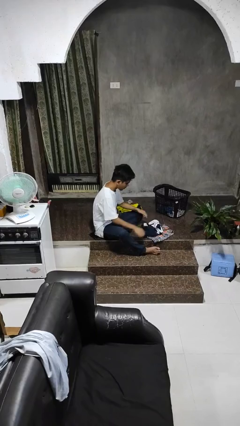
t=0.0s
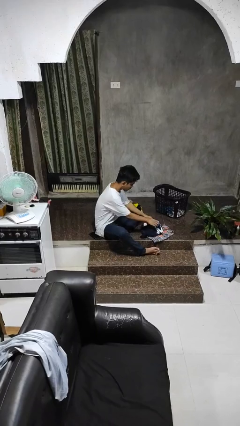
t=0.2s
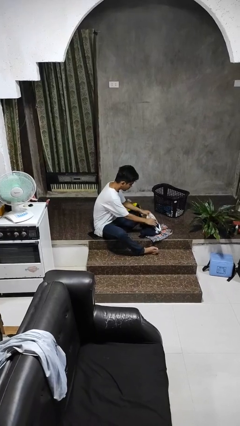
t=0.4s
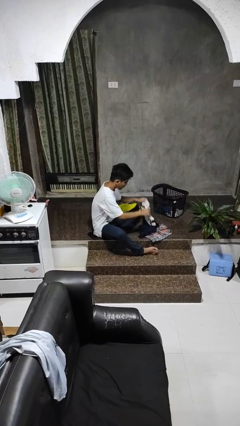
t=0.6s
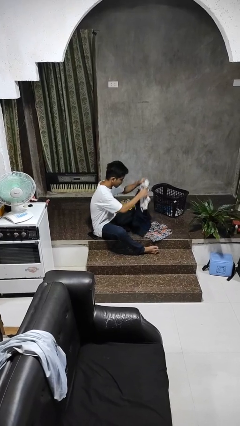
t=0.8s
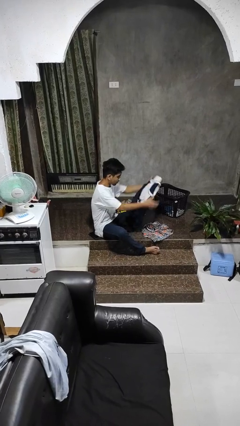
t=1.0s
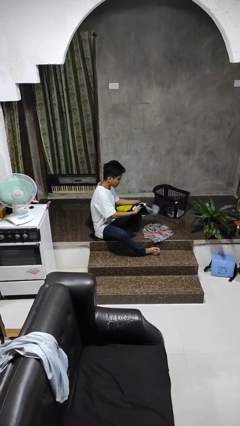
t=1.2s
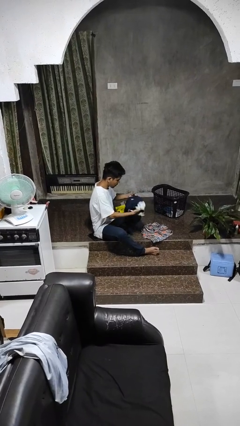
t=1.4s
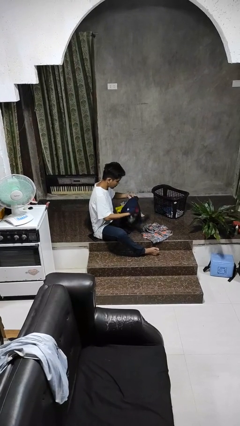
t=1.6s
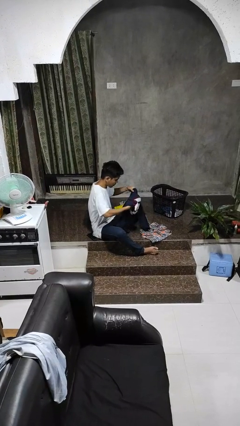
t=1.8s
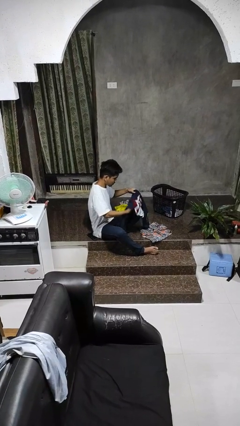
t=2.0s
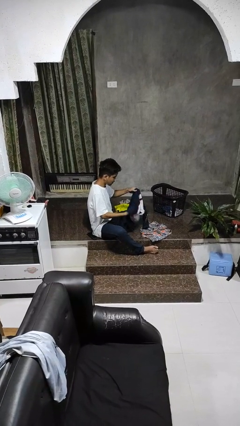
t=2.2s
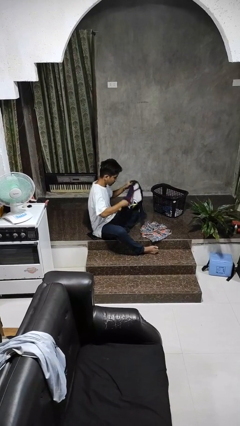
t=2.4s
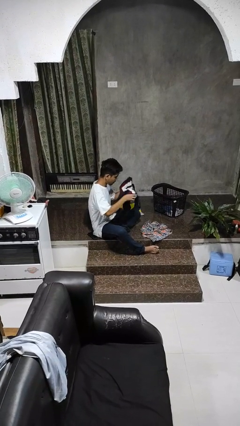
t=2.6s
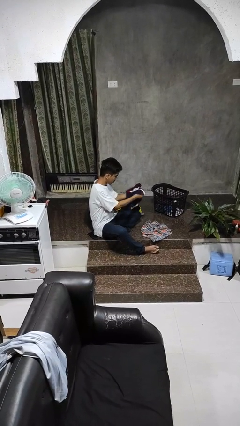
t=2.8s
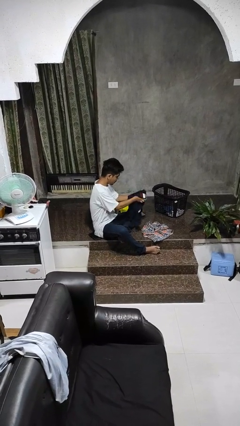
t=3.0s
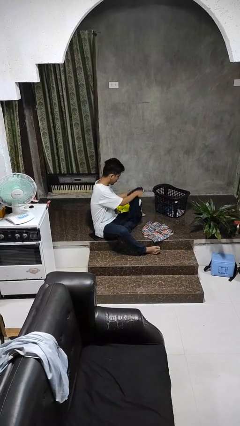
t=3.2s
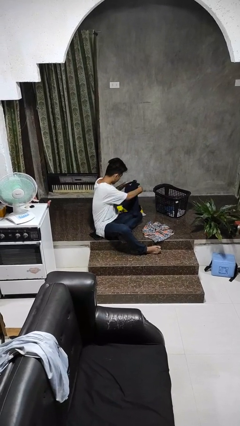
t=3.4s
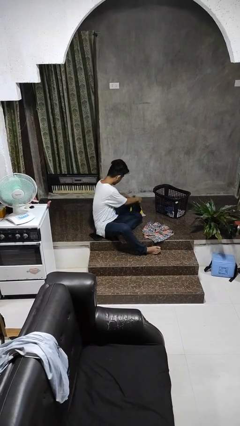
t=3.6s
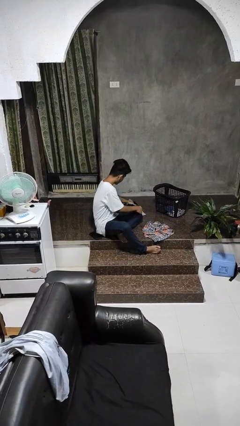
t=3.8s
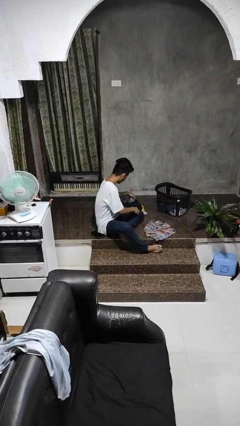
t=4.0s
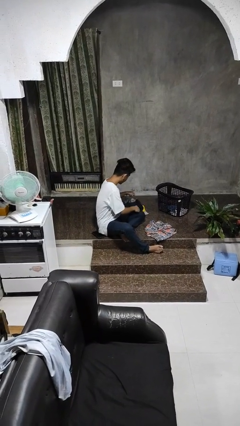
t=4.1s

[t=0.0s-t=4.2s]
person folds shirt

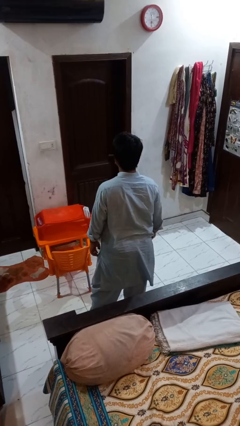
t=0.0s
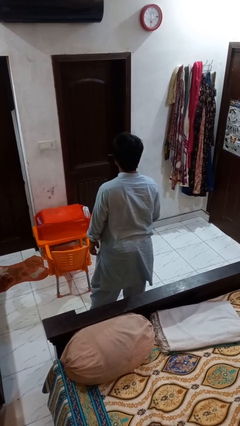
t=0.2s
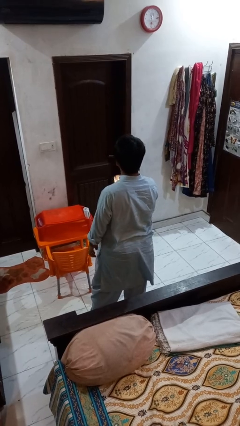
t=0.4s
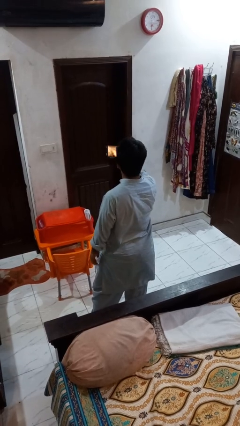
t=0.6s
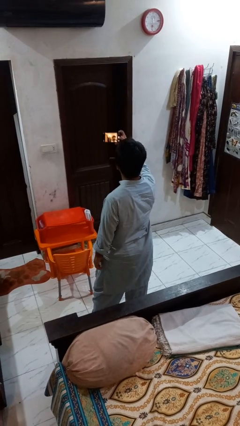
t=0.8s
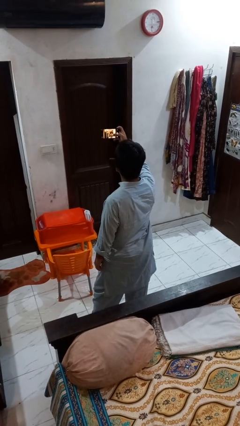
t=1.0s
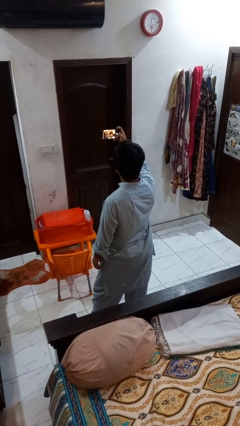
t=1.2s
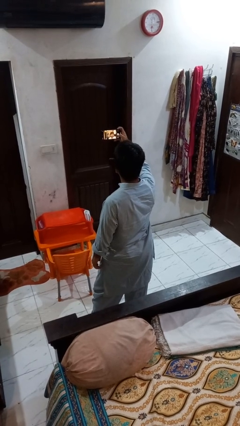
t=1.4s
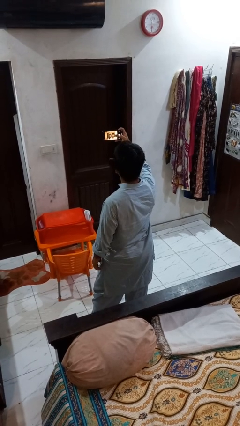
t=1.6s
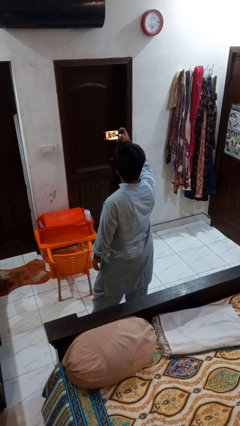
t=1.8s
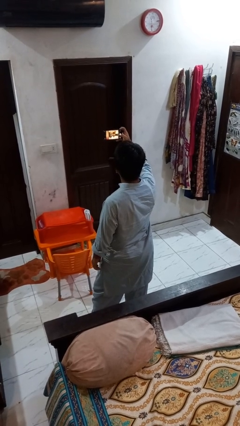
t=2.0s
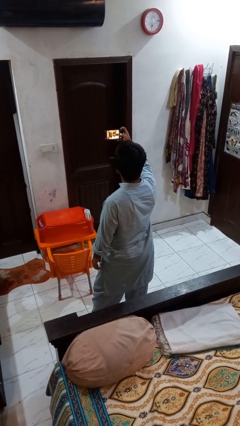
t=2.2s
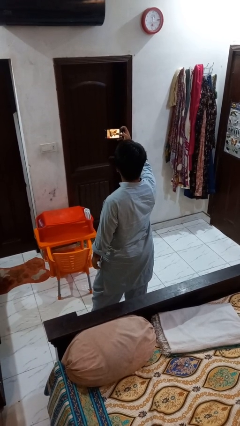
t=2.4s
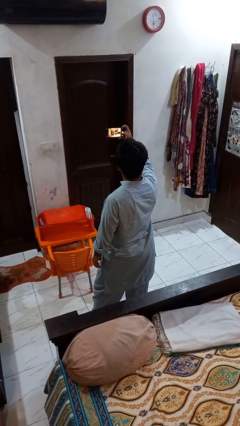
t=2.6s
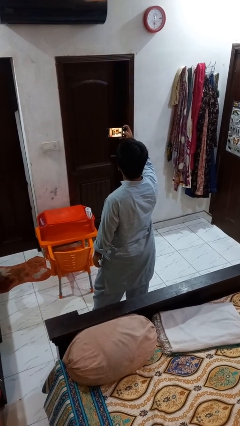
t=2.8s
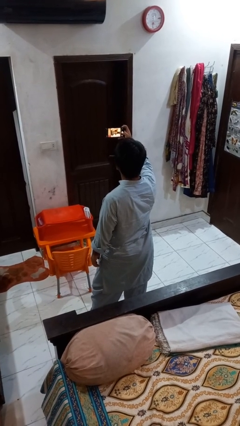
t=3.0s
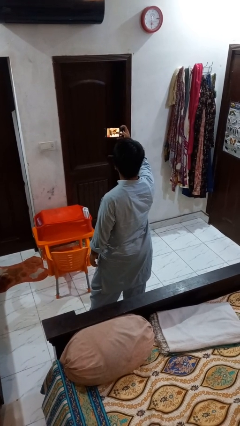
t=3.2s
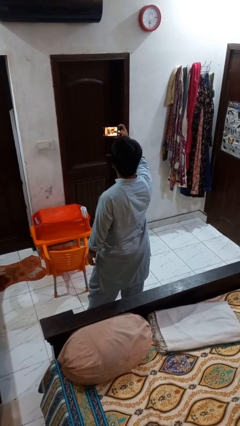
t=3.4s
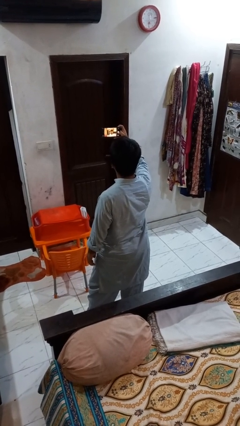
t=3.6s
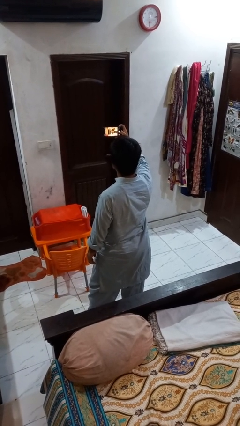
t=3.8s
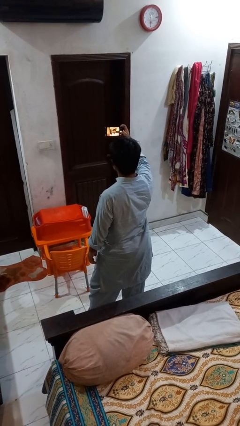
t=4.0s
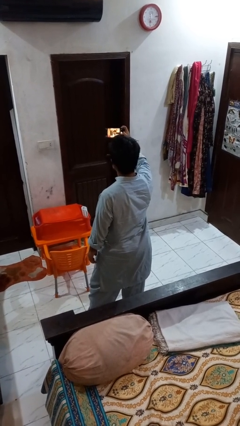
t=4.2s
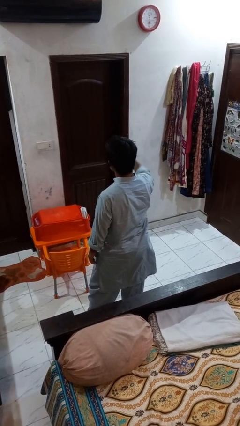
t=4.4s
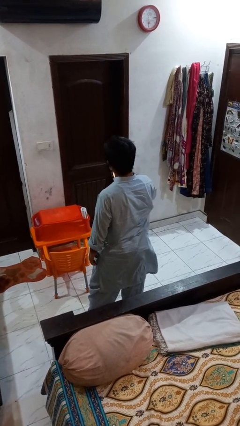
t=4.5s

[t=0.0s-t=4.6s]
person takes selfie

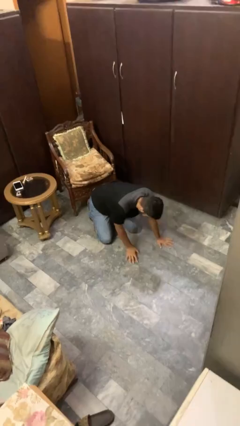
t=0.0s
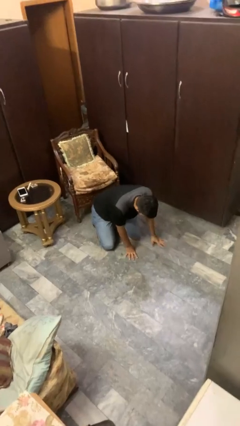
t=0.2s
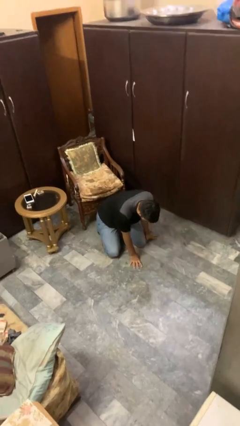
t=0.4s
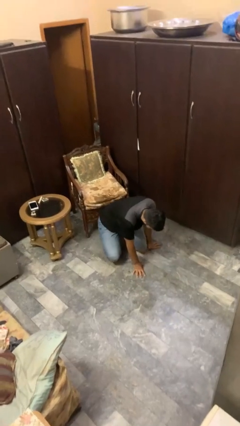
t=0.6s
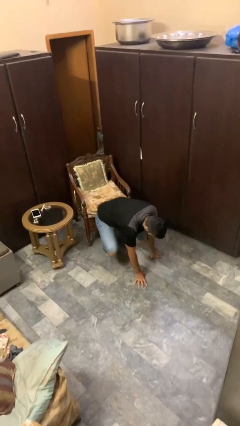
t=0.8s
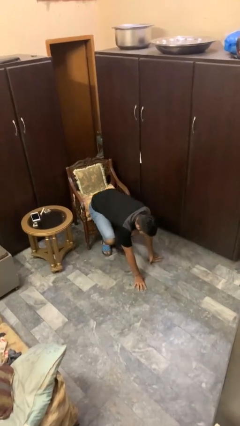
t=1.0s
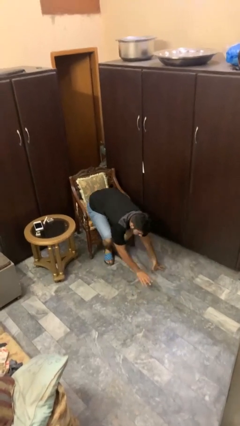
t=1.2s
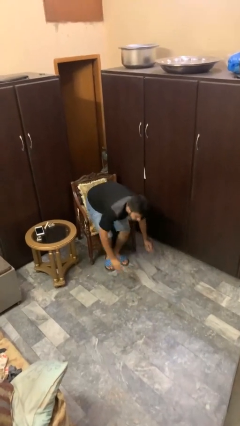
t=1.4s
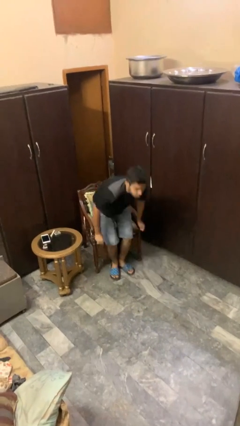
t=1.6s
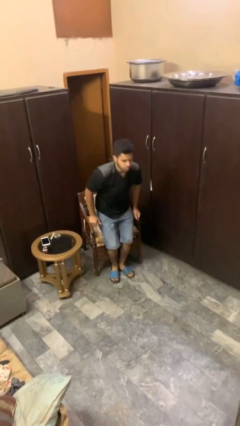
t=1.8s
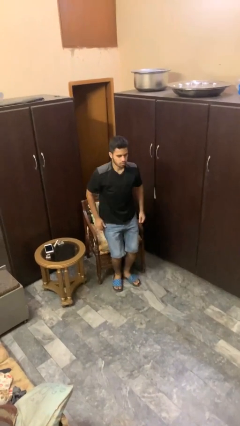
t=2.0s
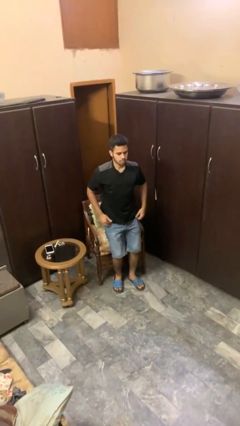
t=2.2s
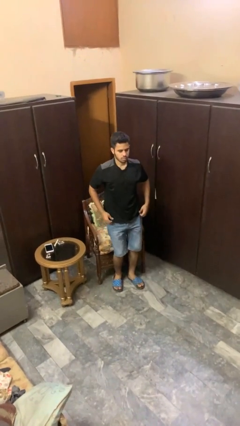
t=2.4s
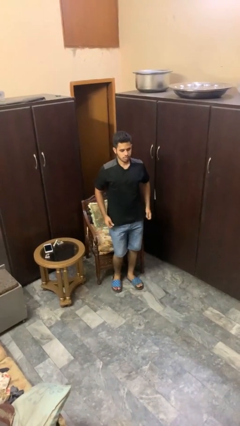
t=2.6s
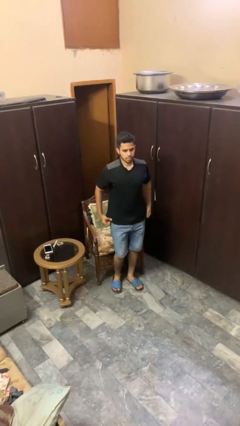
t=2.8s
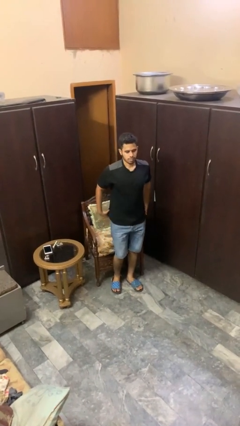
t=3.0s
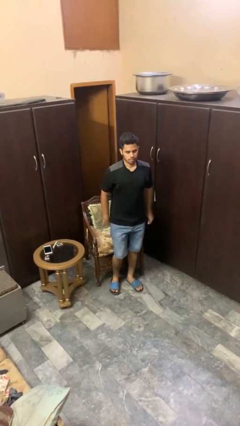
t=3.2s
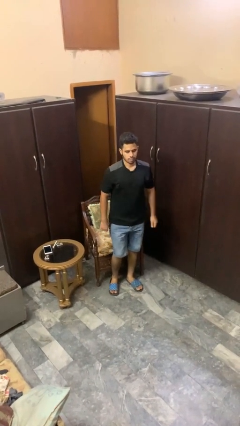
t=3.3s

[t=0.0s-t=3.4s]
person stands up from floor

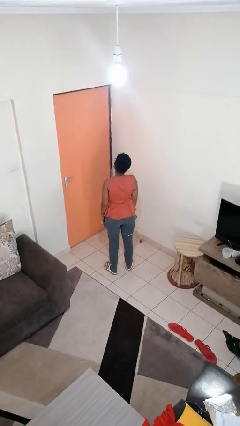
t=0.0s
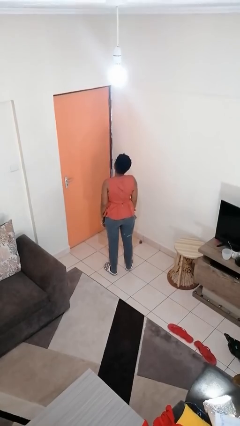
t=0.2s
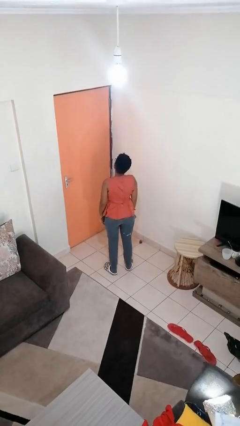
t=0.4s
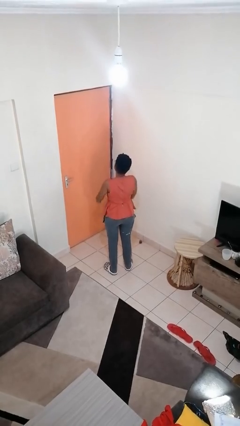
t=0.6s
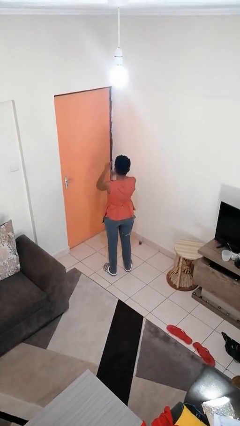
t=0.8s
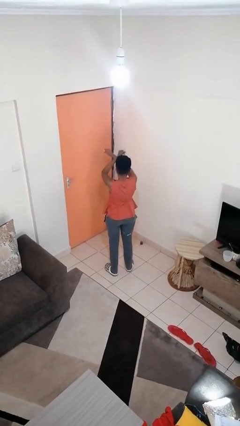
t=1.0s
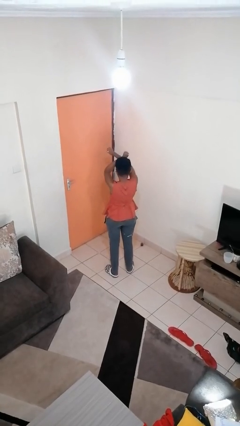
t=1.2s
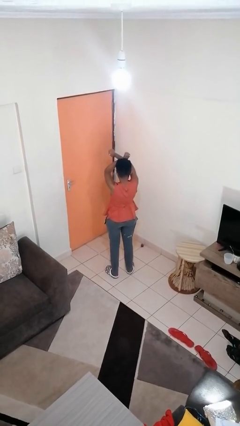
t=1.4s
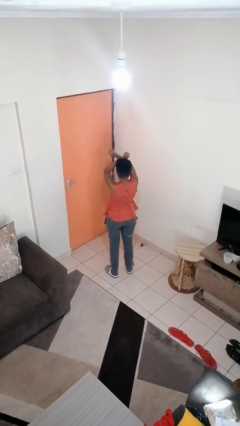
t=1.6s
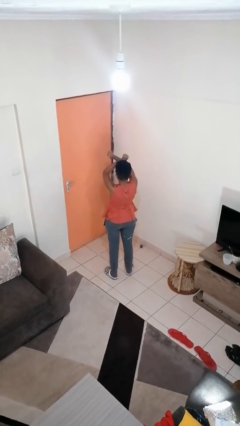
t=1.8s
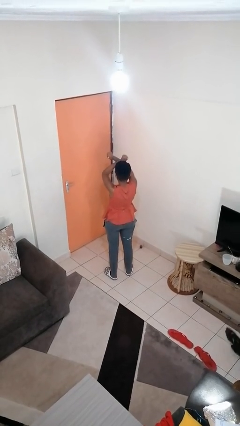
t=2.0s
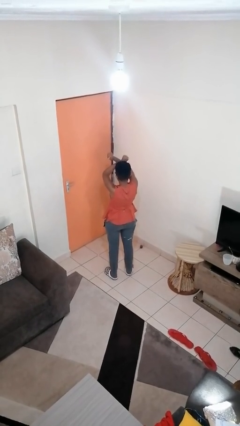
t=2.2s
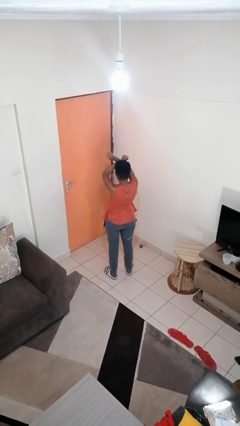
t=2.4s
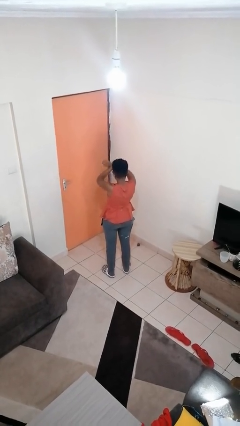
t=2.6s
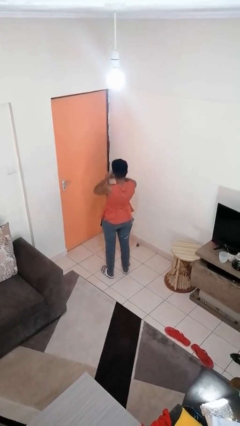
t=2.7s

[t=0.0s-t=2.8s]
person gestures arms x

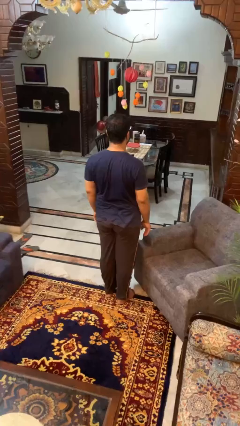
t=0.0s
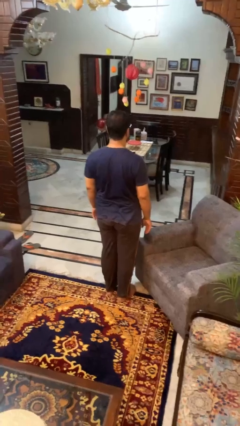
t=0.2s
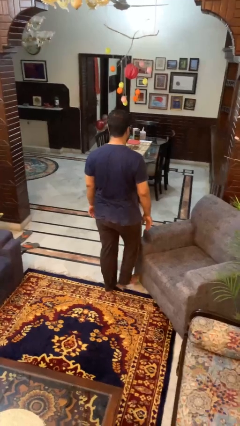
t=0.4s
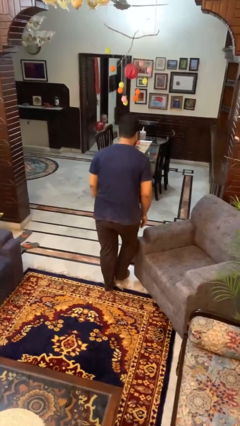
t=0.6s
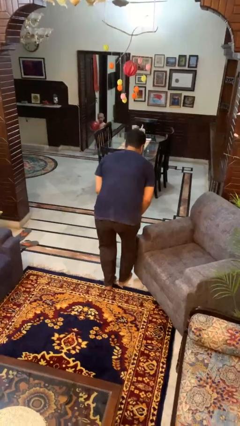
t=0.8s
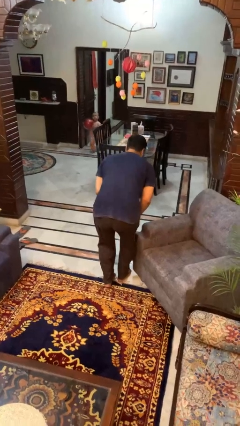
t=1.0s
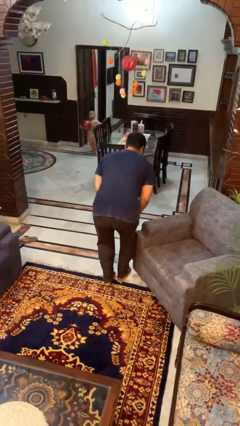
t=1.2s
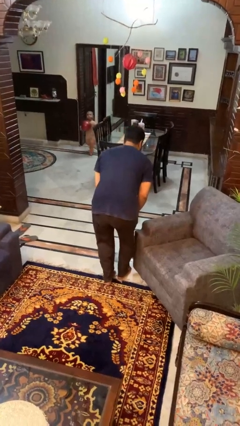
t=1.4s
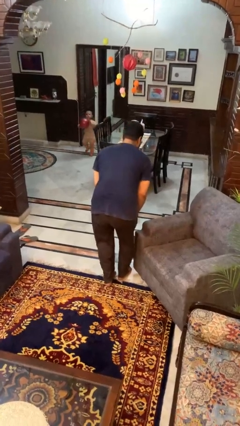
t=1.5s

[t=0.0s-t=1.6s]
person stubs toe

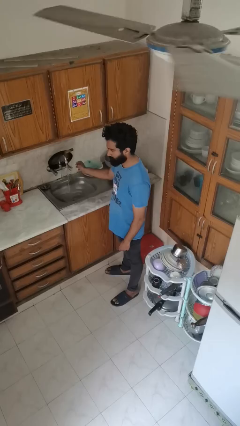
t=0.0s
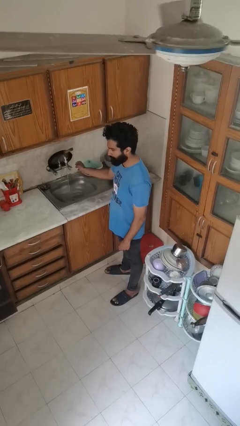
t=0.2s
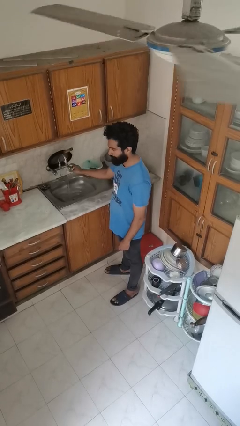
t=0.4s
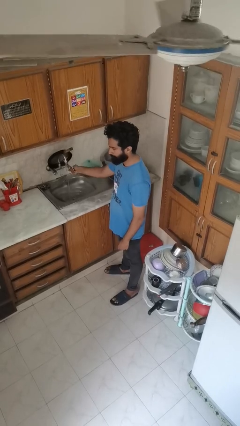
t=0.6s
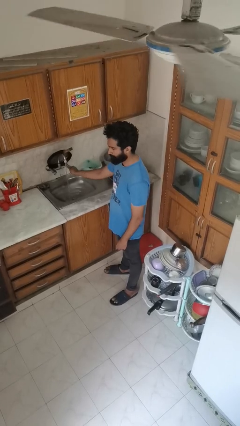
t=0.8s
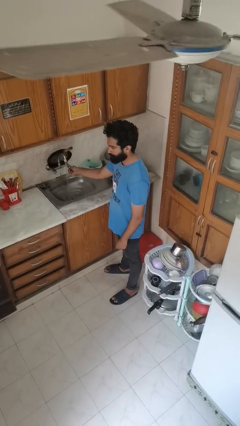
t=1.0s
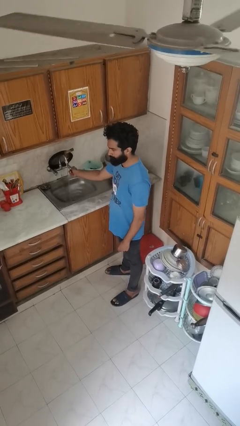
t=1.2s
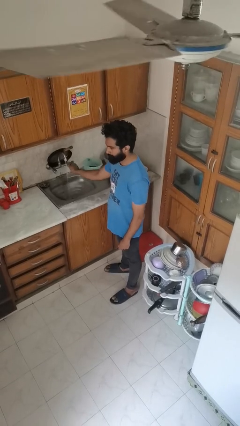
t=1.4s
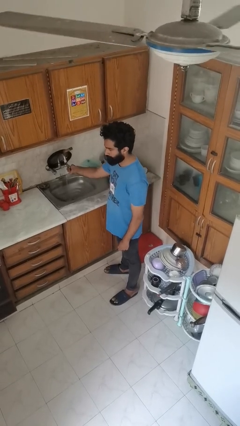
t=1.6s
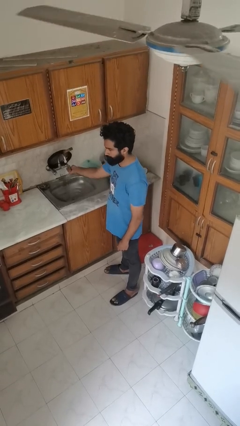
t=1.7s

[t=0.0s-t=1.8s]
person turns off faucet
